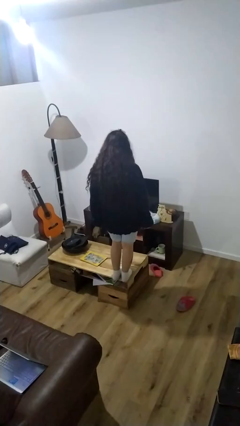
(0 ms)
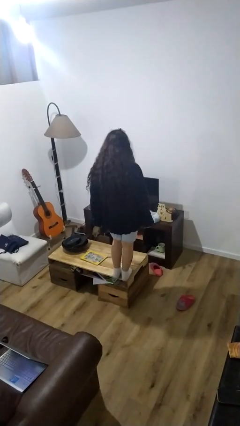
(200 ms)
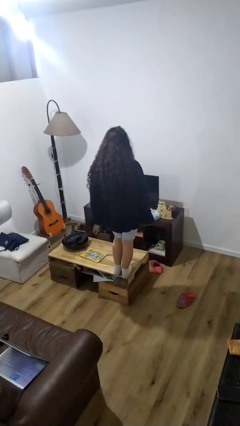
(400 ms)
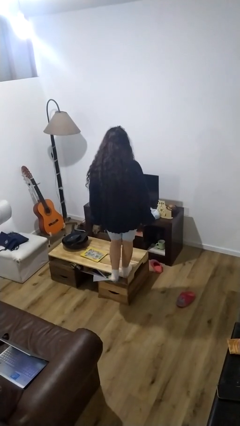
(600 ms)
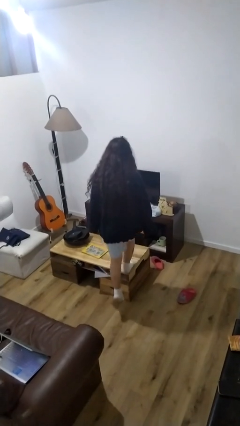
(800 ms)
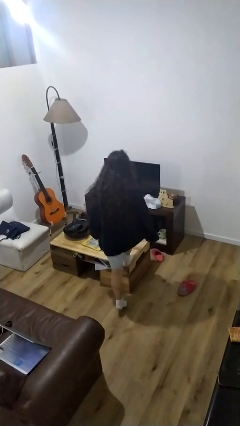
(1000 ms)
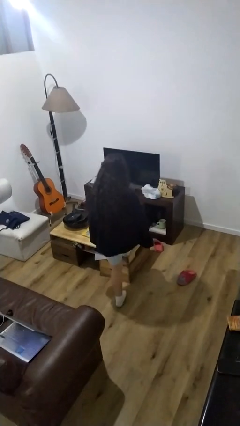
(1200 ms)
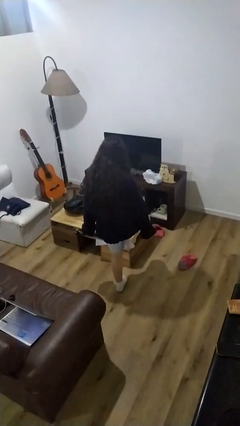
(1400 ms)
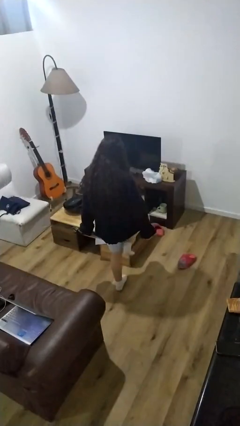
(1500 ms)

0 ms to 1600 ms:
person climbs off table

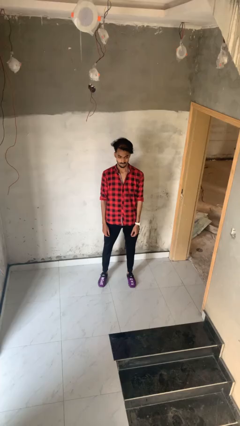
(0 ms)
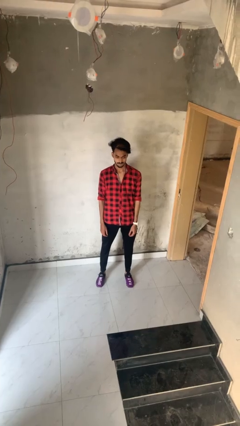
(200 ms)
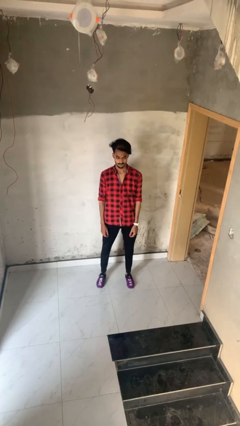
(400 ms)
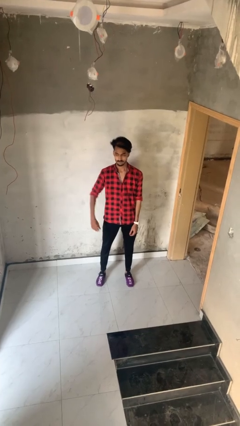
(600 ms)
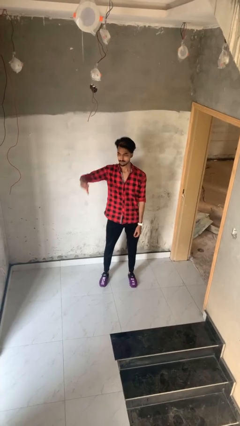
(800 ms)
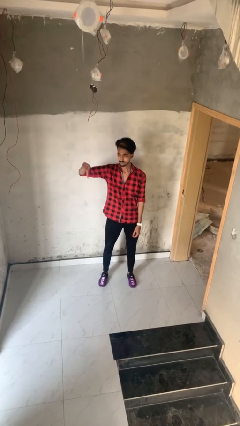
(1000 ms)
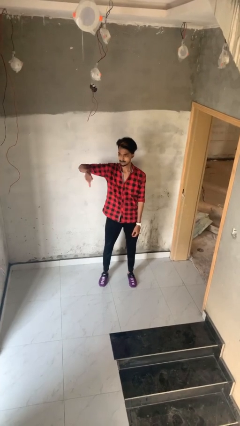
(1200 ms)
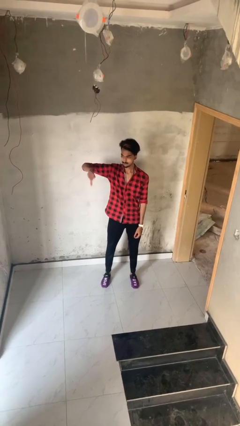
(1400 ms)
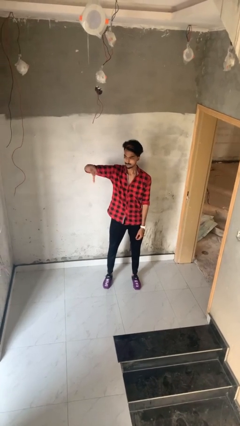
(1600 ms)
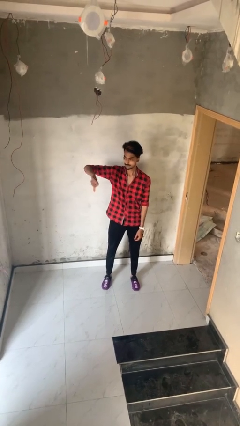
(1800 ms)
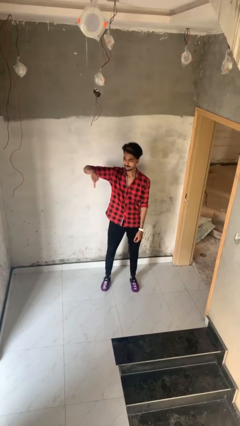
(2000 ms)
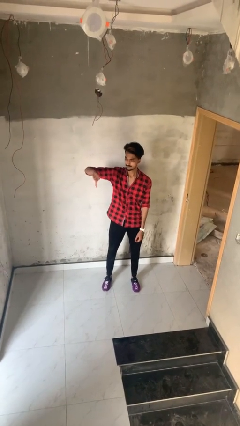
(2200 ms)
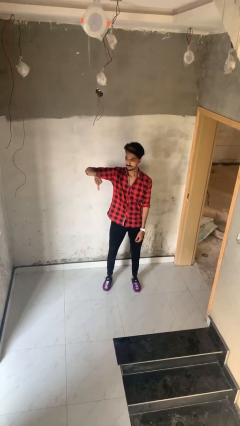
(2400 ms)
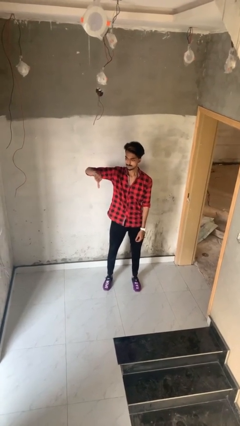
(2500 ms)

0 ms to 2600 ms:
person gestures thumbs down

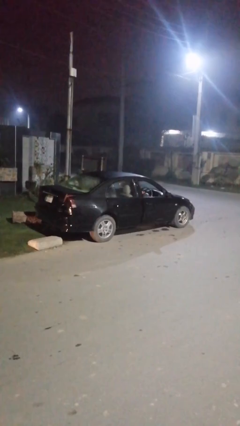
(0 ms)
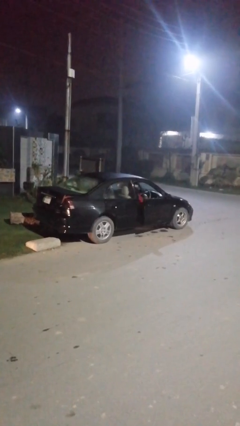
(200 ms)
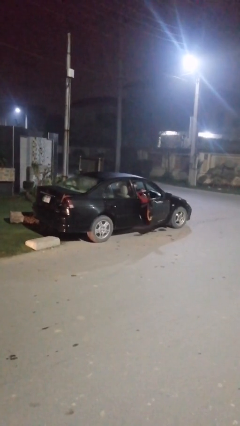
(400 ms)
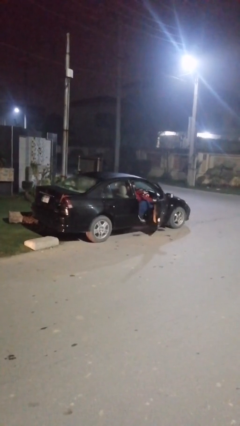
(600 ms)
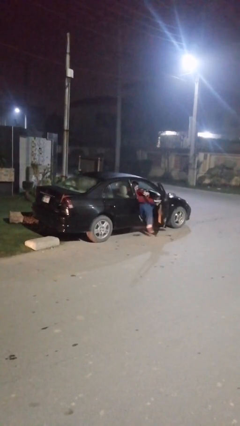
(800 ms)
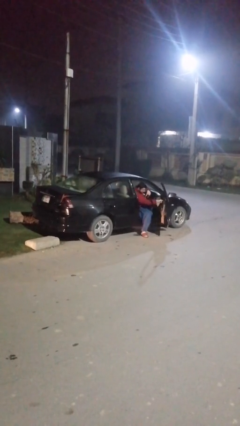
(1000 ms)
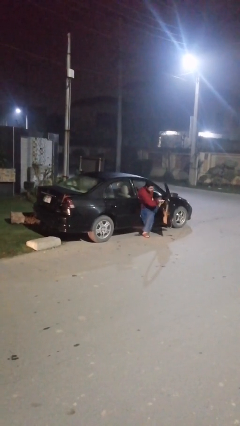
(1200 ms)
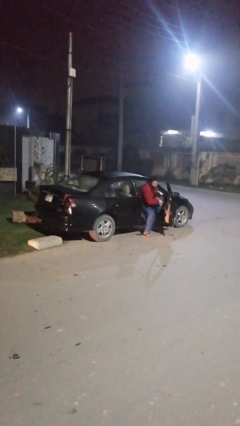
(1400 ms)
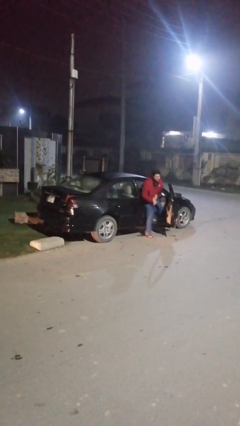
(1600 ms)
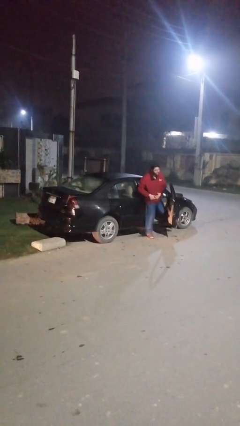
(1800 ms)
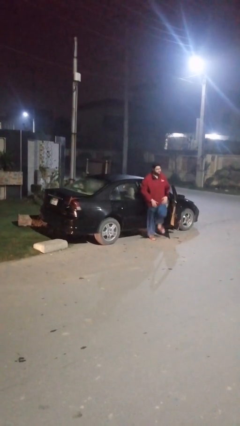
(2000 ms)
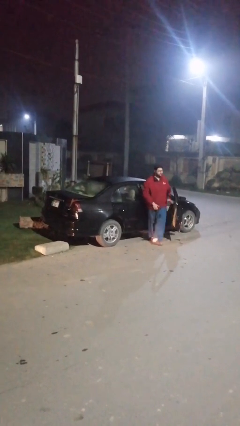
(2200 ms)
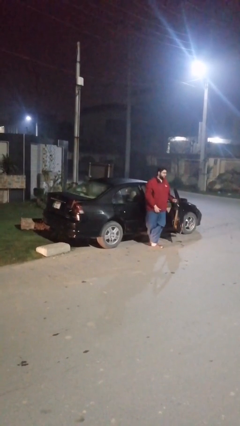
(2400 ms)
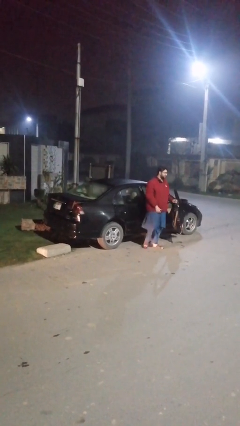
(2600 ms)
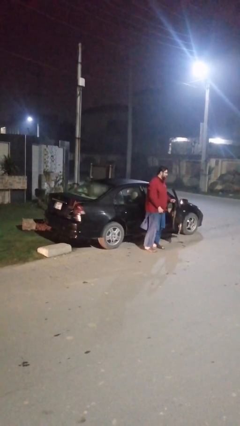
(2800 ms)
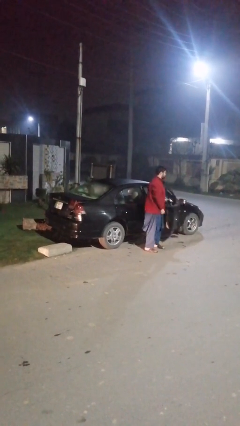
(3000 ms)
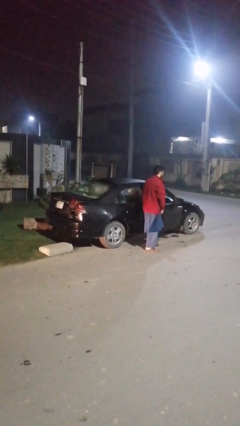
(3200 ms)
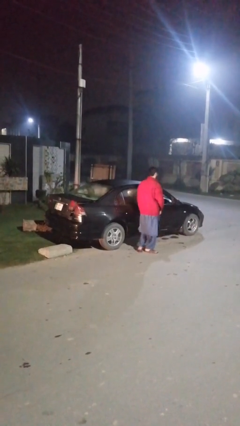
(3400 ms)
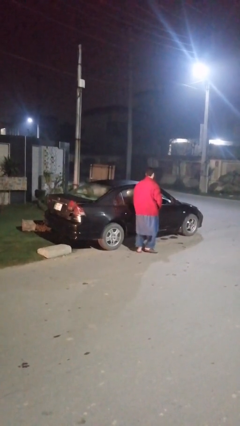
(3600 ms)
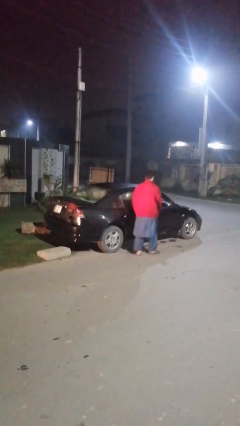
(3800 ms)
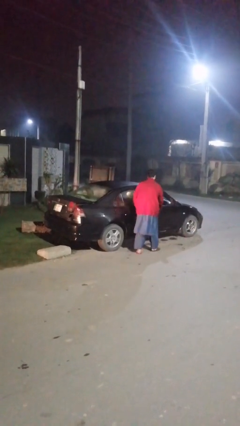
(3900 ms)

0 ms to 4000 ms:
car drops off person

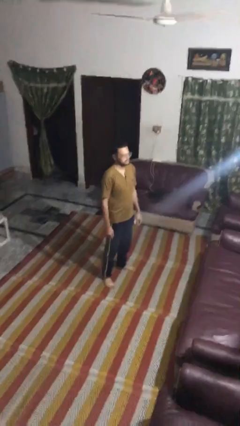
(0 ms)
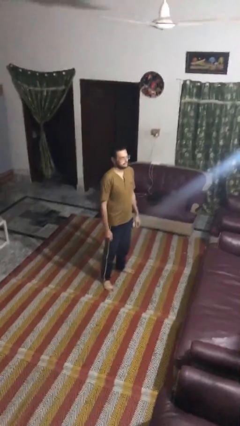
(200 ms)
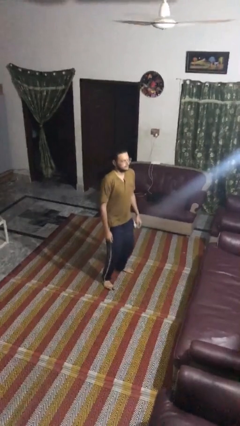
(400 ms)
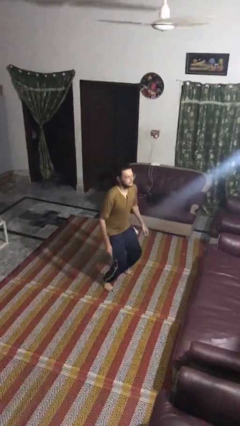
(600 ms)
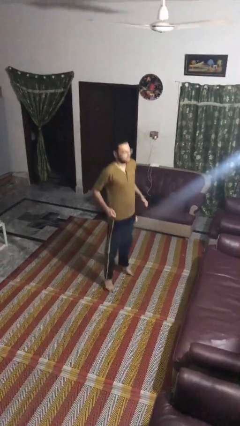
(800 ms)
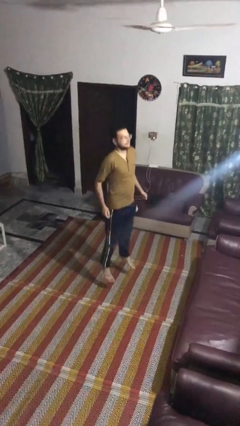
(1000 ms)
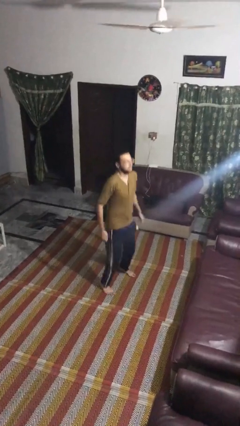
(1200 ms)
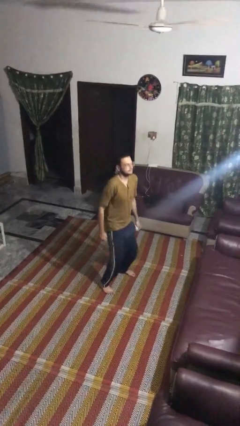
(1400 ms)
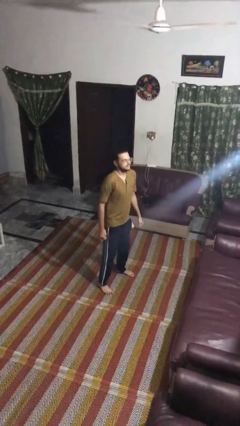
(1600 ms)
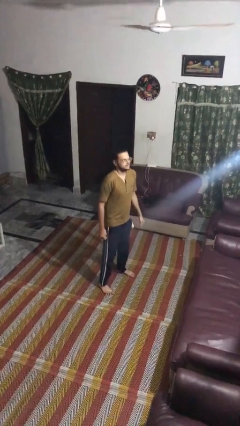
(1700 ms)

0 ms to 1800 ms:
person jumps

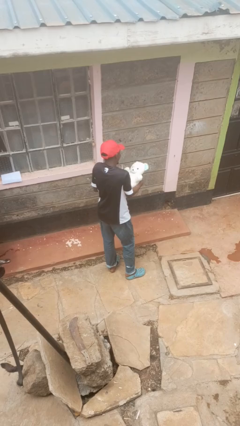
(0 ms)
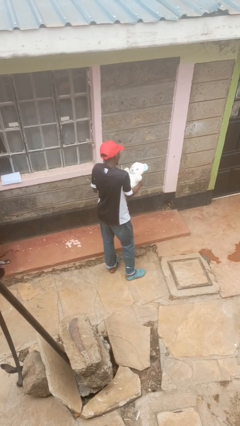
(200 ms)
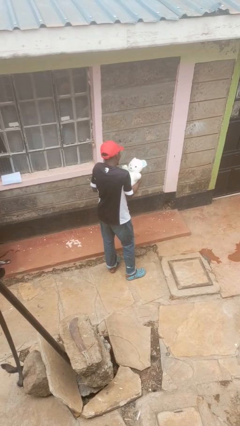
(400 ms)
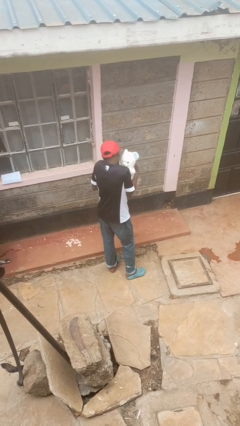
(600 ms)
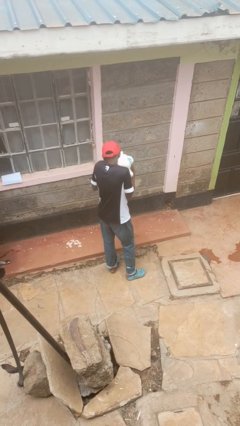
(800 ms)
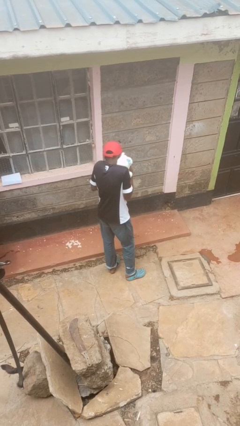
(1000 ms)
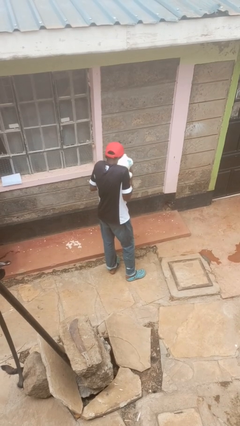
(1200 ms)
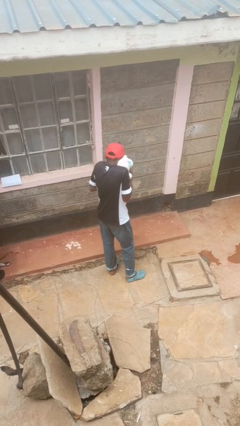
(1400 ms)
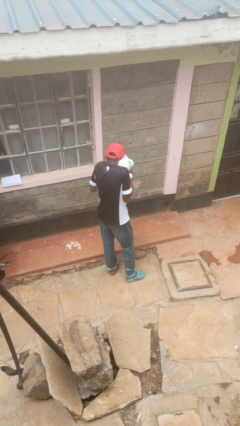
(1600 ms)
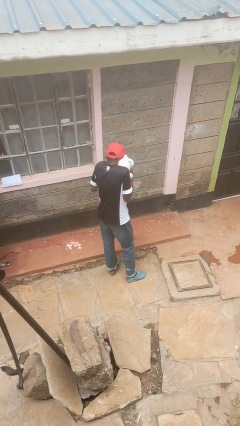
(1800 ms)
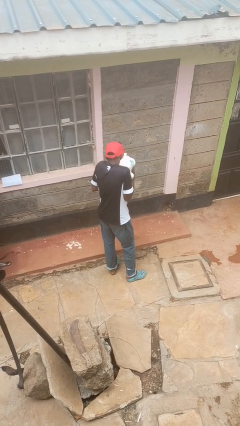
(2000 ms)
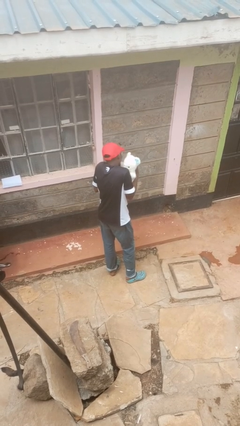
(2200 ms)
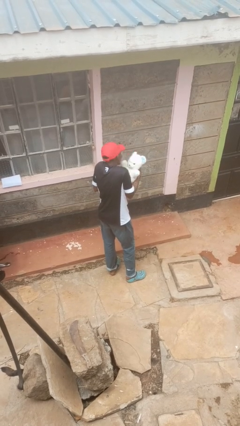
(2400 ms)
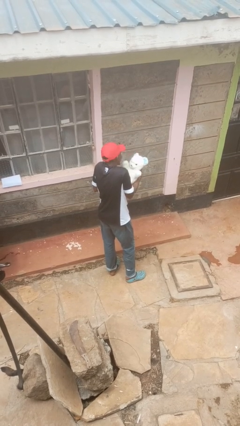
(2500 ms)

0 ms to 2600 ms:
person hugs stuffed animal

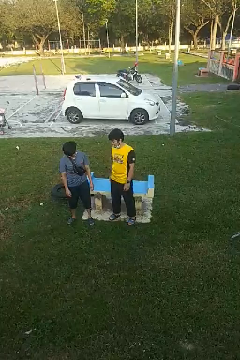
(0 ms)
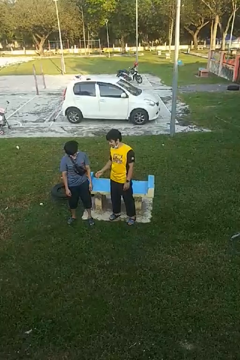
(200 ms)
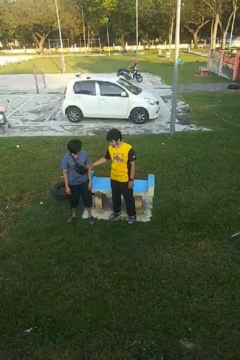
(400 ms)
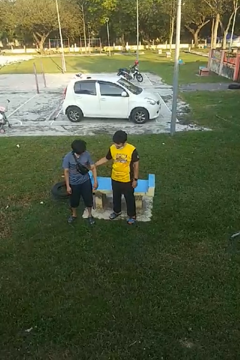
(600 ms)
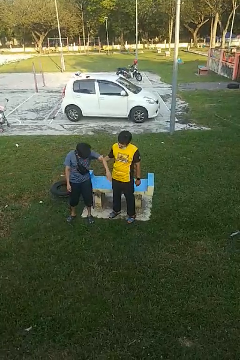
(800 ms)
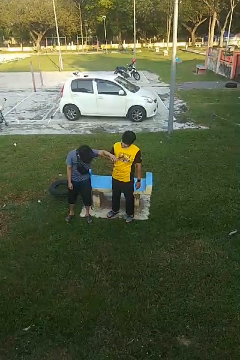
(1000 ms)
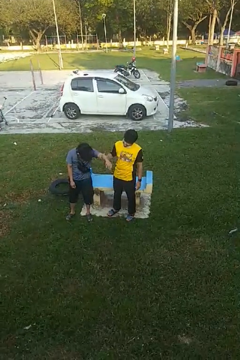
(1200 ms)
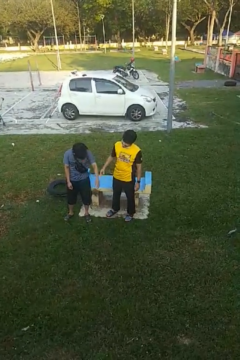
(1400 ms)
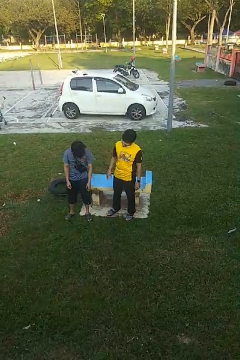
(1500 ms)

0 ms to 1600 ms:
person grabs person by bicep

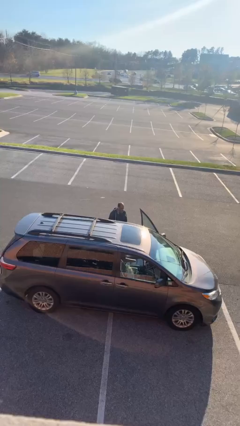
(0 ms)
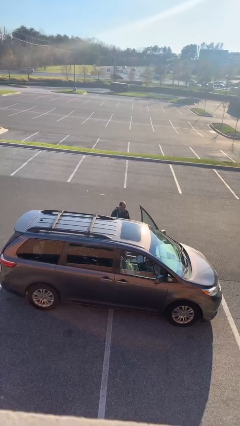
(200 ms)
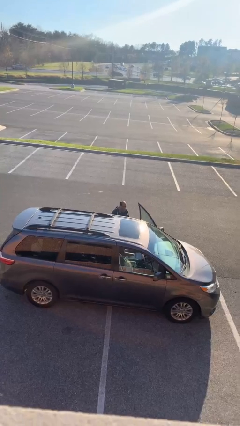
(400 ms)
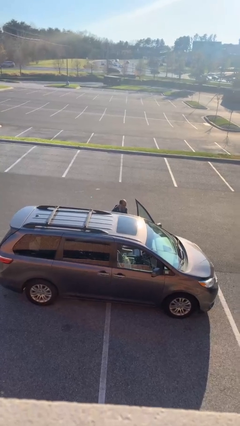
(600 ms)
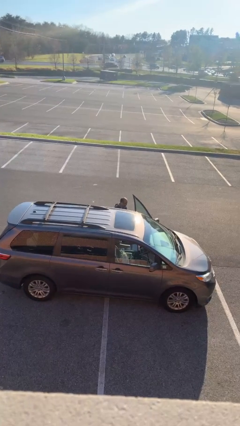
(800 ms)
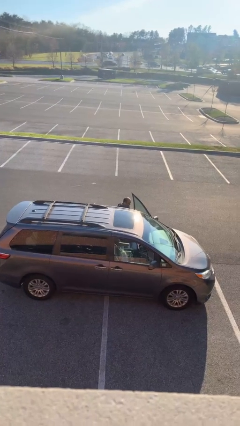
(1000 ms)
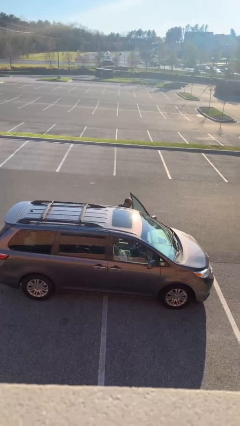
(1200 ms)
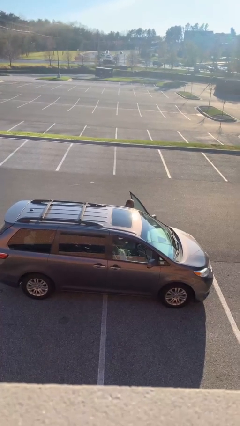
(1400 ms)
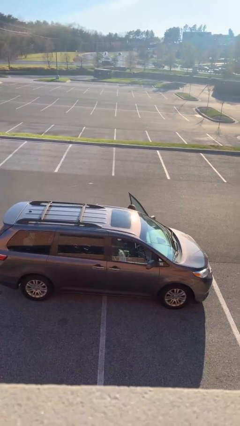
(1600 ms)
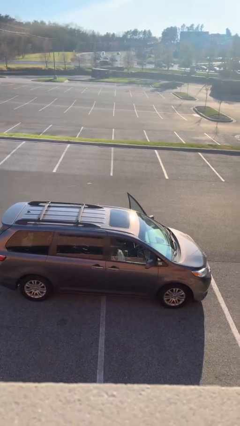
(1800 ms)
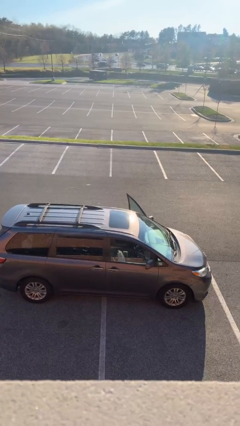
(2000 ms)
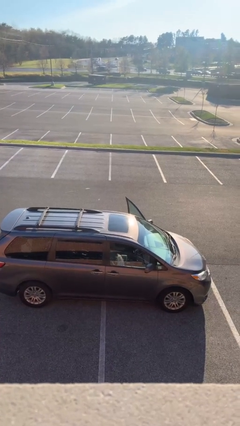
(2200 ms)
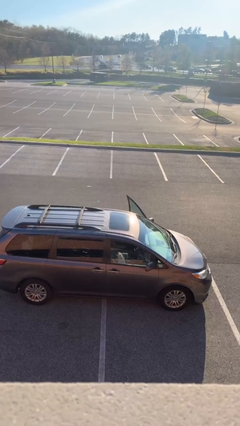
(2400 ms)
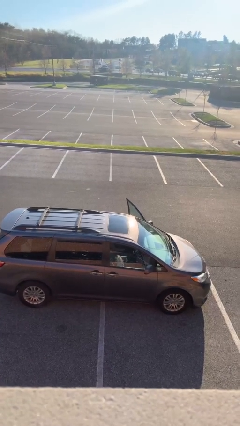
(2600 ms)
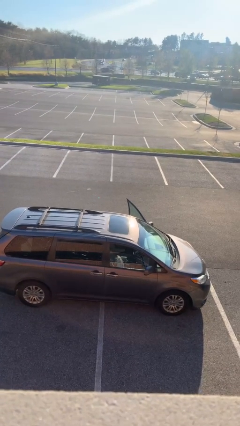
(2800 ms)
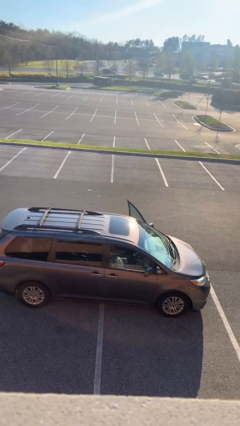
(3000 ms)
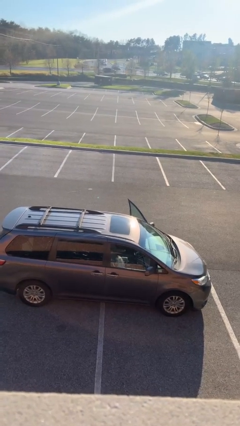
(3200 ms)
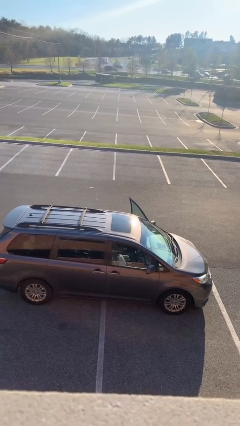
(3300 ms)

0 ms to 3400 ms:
person enters car
